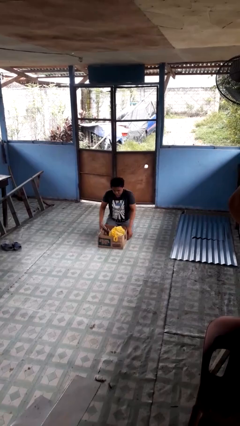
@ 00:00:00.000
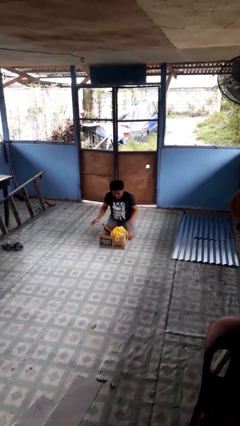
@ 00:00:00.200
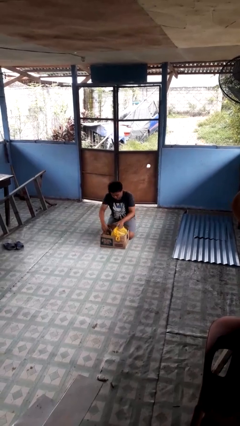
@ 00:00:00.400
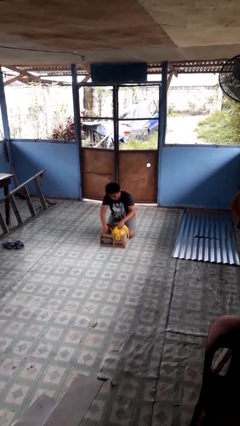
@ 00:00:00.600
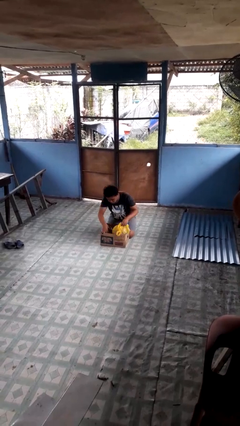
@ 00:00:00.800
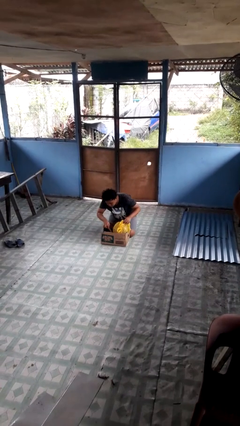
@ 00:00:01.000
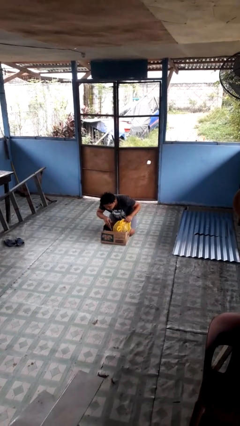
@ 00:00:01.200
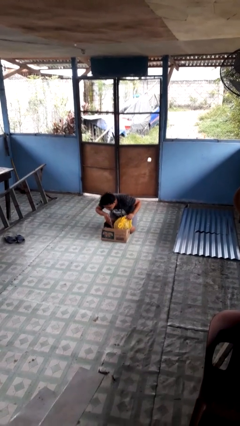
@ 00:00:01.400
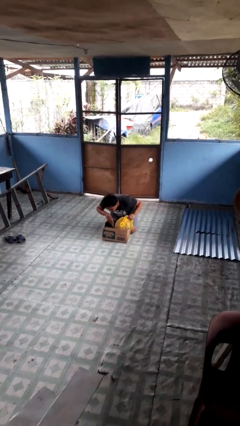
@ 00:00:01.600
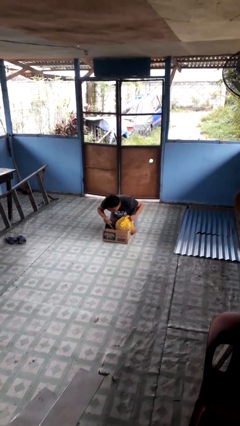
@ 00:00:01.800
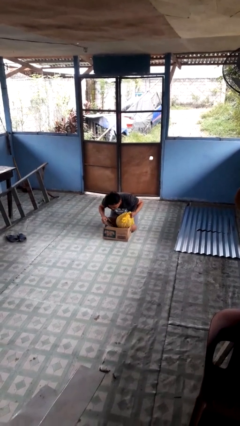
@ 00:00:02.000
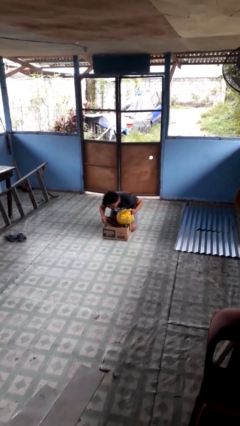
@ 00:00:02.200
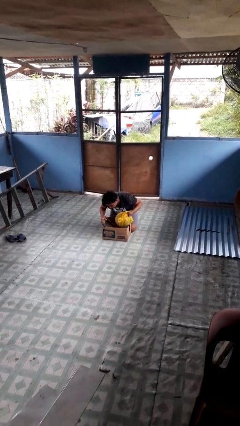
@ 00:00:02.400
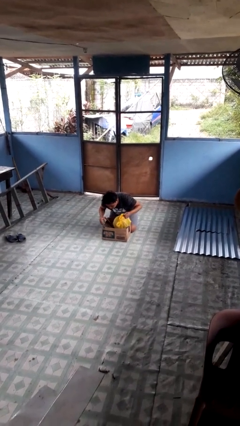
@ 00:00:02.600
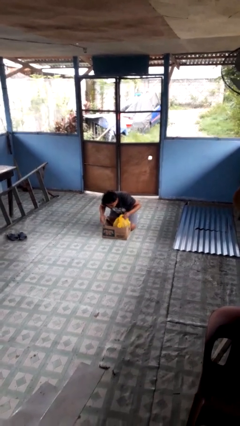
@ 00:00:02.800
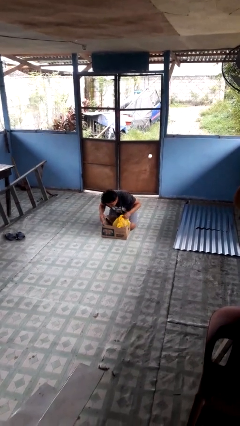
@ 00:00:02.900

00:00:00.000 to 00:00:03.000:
person searches in box

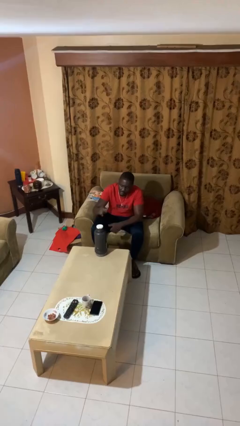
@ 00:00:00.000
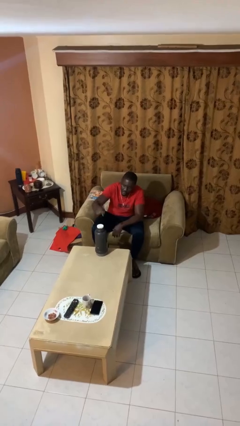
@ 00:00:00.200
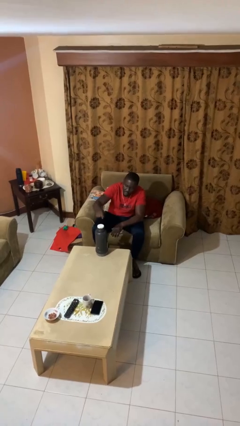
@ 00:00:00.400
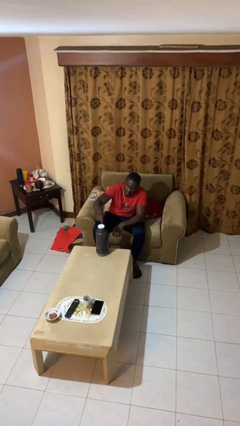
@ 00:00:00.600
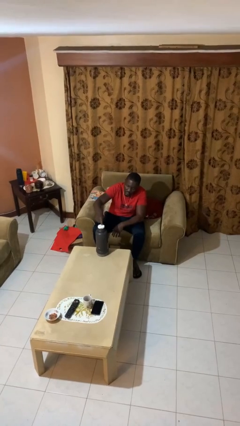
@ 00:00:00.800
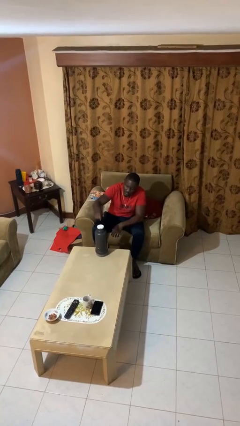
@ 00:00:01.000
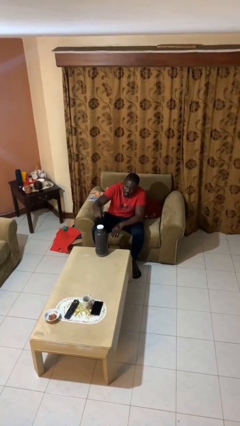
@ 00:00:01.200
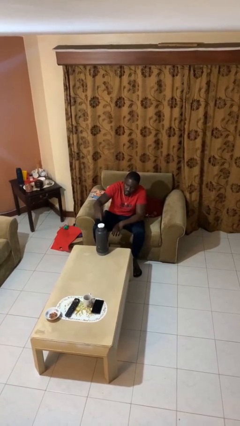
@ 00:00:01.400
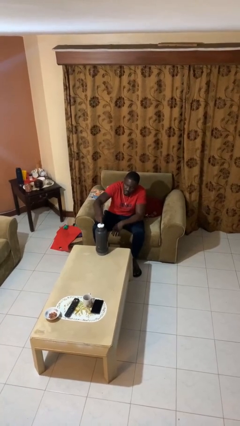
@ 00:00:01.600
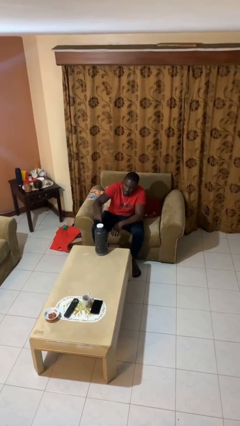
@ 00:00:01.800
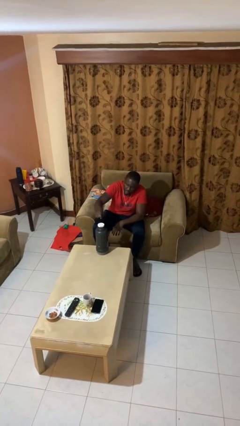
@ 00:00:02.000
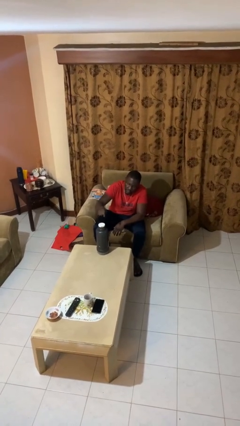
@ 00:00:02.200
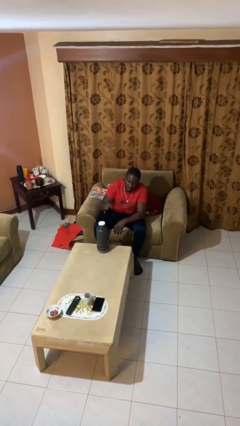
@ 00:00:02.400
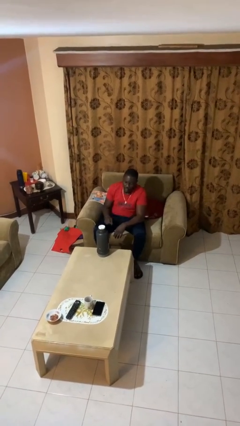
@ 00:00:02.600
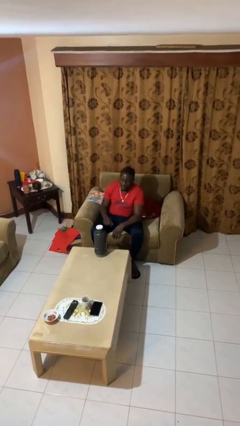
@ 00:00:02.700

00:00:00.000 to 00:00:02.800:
person taps object with finger

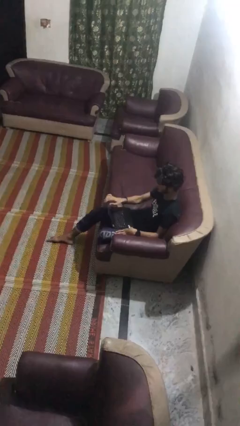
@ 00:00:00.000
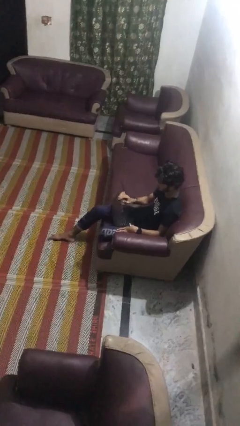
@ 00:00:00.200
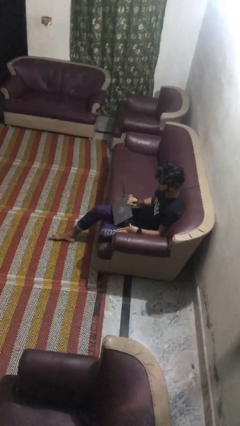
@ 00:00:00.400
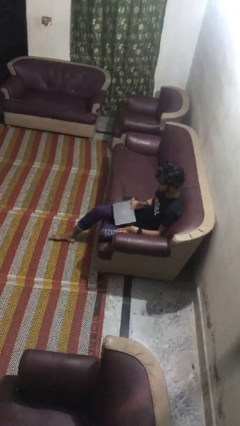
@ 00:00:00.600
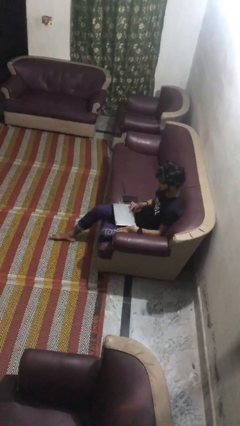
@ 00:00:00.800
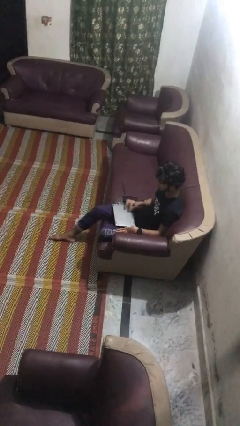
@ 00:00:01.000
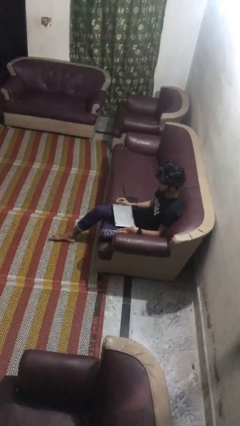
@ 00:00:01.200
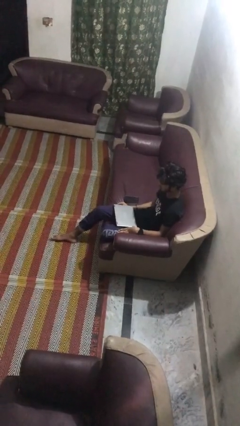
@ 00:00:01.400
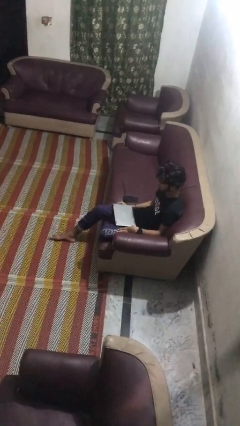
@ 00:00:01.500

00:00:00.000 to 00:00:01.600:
person closes laptop

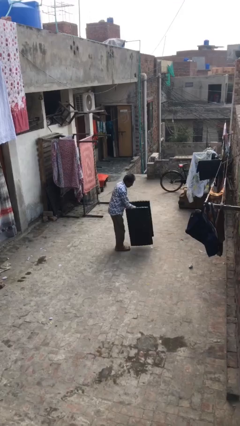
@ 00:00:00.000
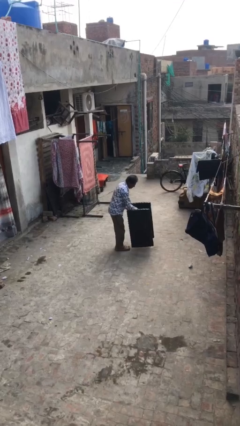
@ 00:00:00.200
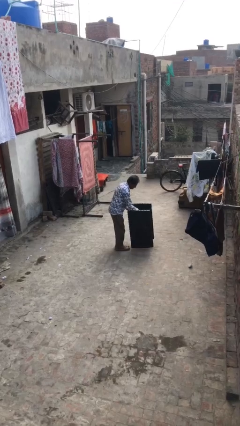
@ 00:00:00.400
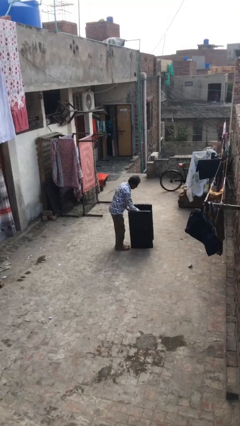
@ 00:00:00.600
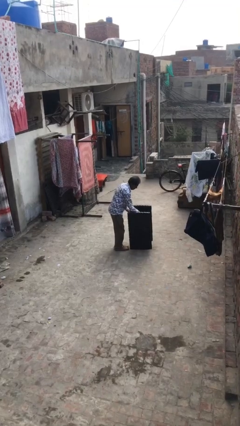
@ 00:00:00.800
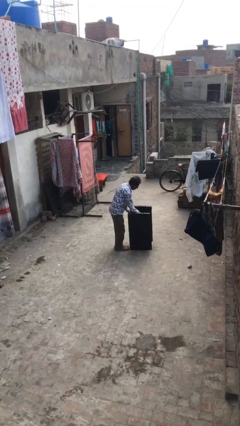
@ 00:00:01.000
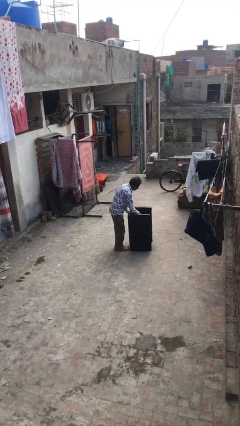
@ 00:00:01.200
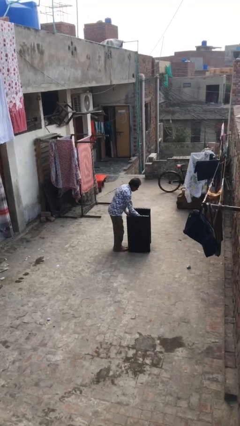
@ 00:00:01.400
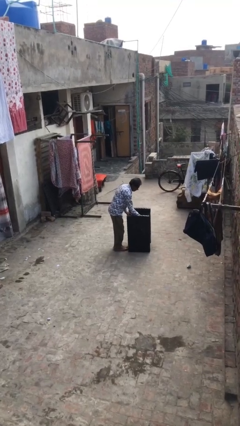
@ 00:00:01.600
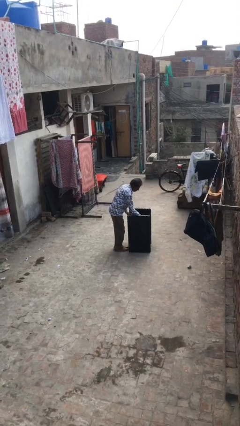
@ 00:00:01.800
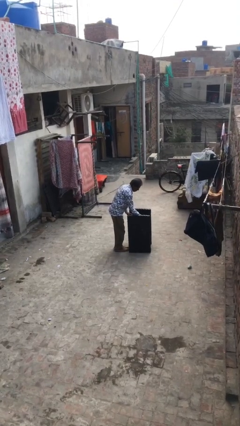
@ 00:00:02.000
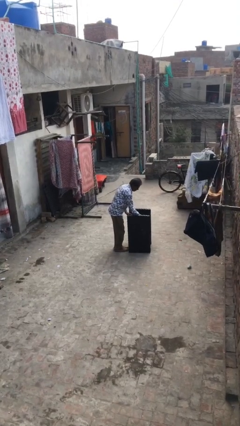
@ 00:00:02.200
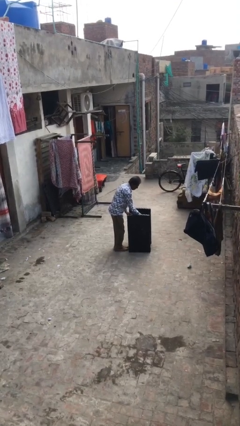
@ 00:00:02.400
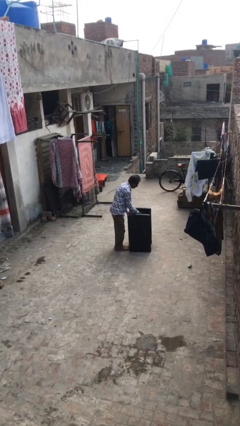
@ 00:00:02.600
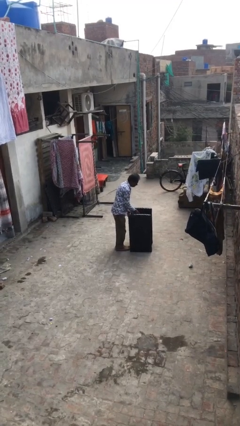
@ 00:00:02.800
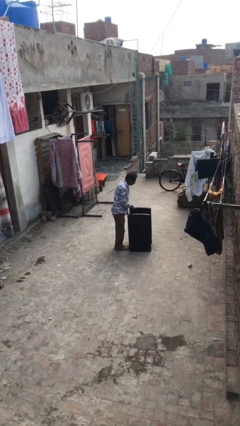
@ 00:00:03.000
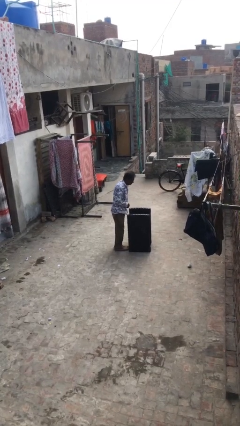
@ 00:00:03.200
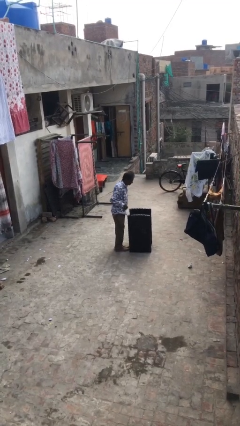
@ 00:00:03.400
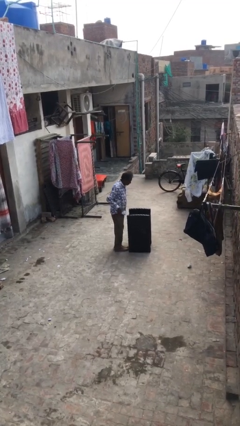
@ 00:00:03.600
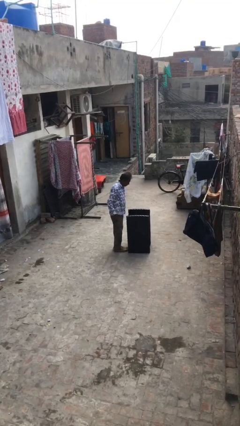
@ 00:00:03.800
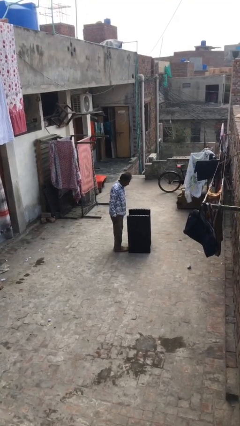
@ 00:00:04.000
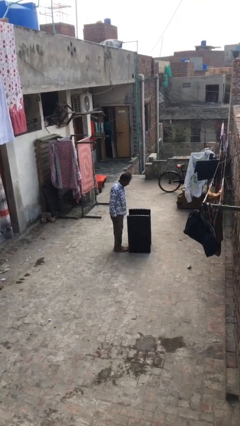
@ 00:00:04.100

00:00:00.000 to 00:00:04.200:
person puts down object on floor

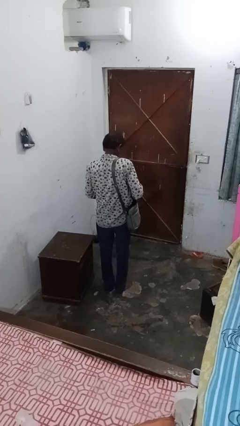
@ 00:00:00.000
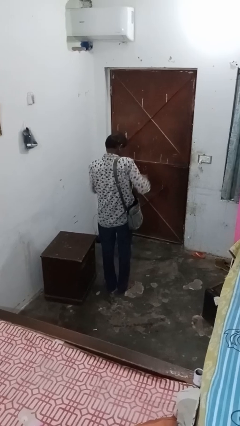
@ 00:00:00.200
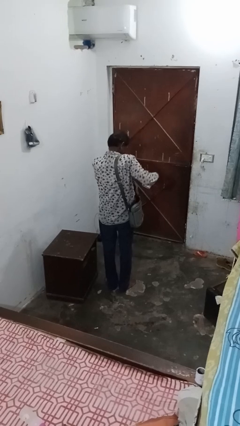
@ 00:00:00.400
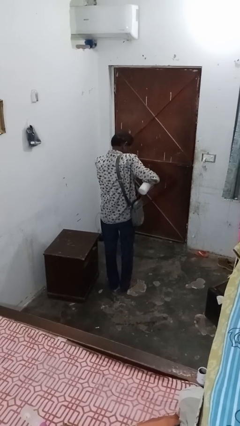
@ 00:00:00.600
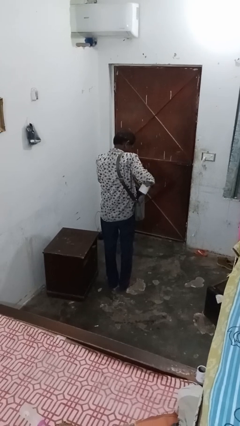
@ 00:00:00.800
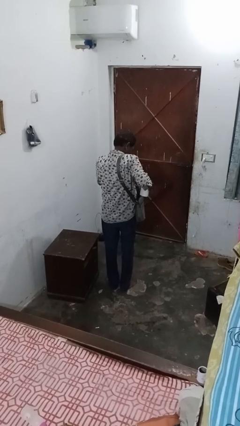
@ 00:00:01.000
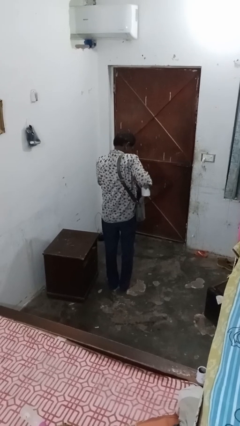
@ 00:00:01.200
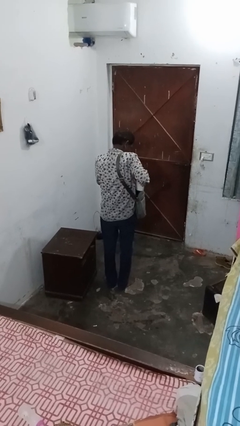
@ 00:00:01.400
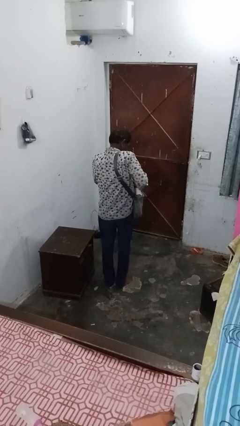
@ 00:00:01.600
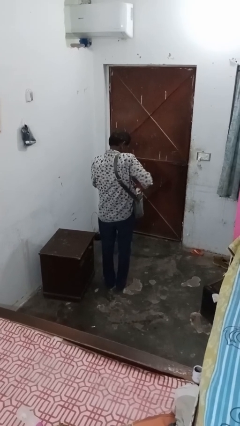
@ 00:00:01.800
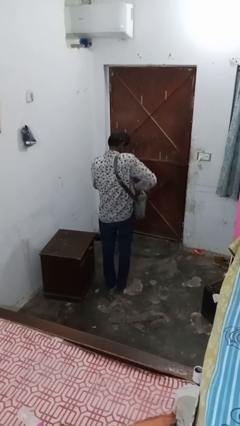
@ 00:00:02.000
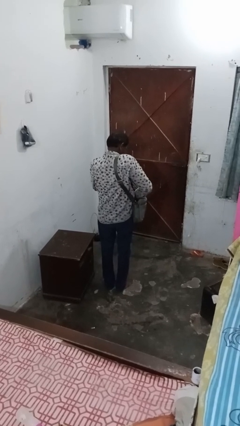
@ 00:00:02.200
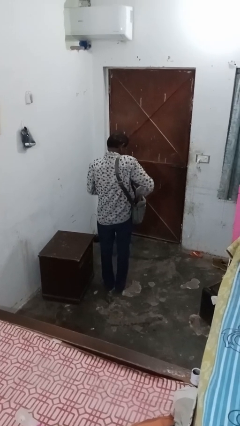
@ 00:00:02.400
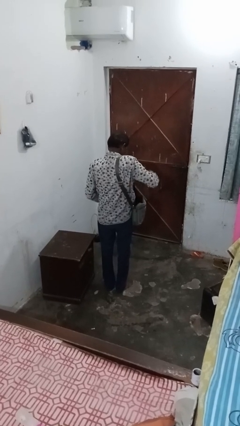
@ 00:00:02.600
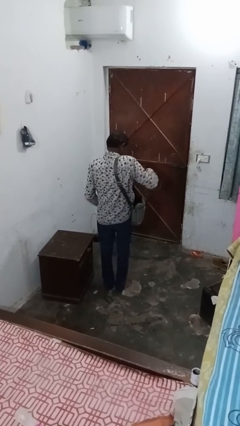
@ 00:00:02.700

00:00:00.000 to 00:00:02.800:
person puts object into bag

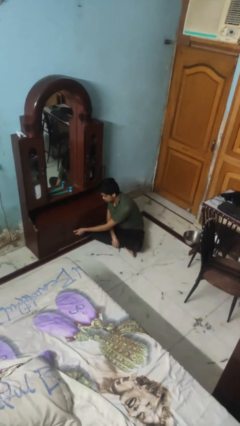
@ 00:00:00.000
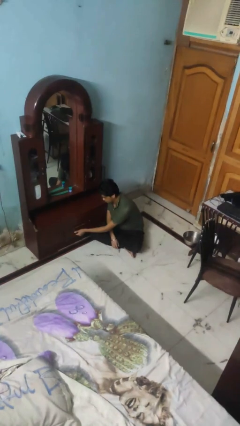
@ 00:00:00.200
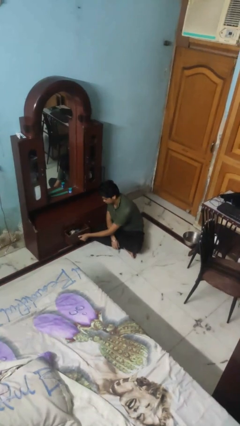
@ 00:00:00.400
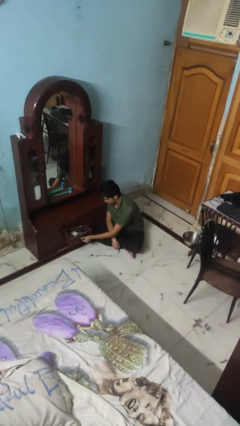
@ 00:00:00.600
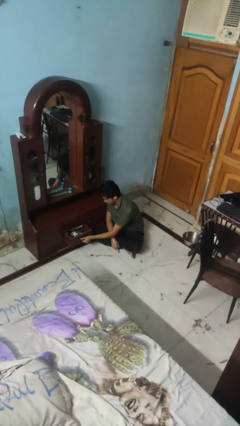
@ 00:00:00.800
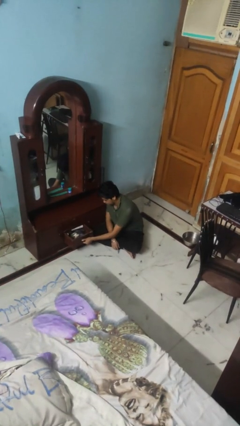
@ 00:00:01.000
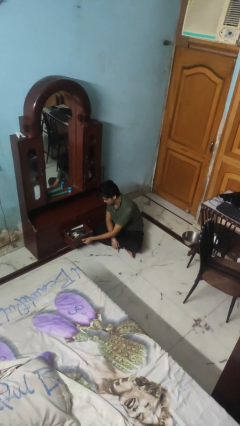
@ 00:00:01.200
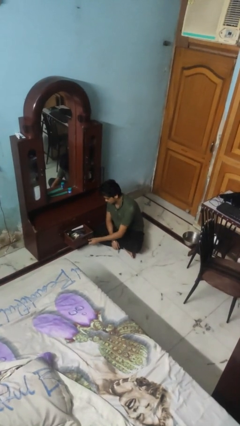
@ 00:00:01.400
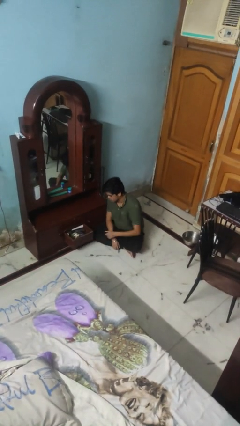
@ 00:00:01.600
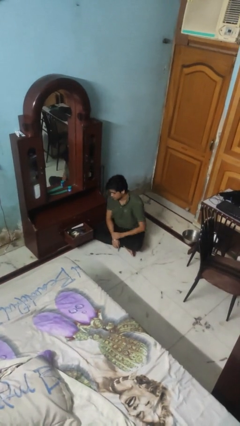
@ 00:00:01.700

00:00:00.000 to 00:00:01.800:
person opens dresser drawer

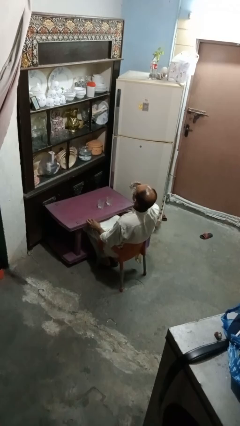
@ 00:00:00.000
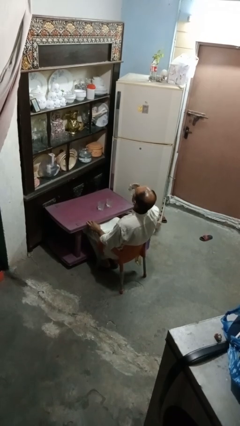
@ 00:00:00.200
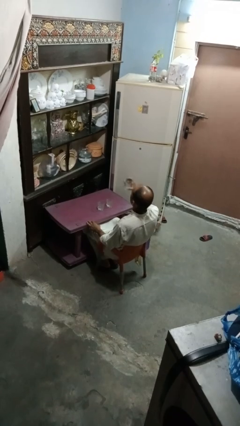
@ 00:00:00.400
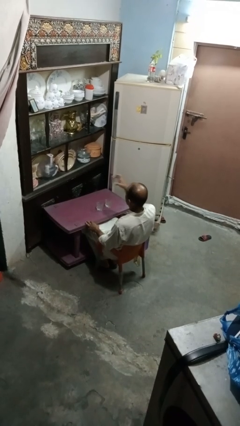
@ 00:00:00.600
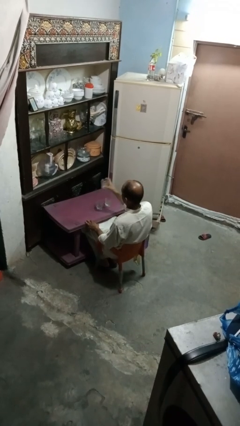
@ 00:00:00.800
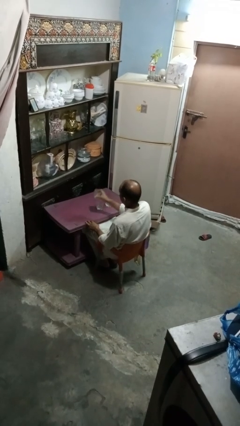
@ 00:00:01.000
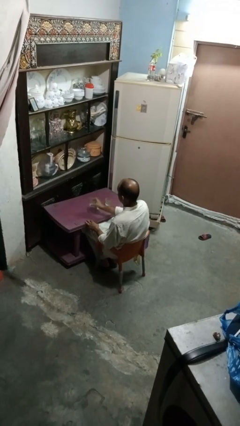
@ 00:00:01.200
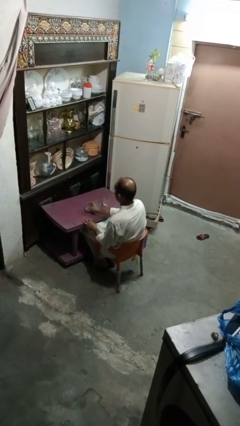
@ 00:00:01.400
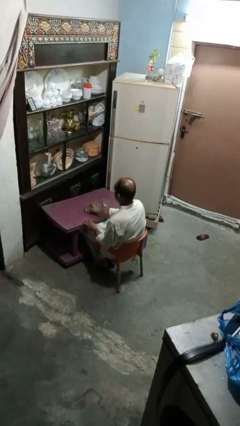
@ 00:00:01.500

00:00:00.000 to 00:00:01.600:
person puts down object on table
